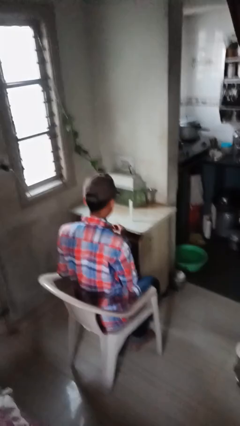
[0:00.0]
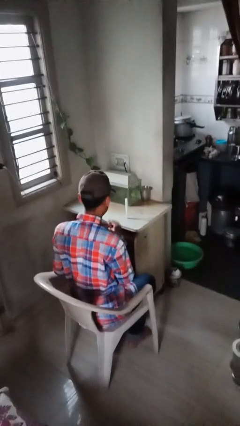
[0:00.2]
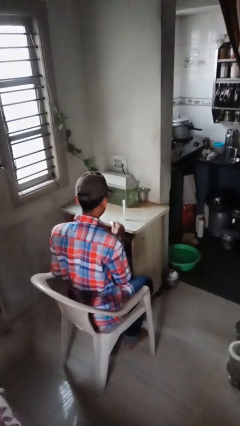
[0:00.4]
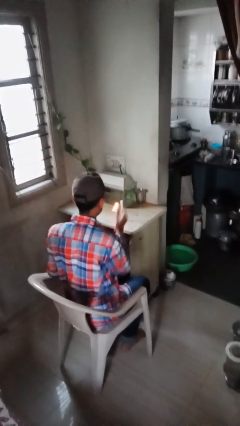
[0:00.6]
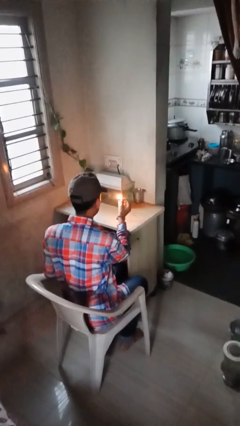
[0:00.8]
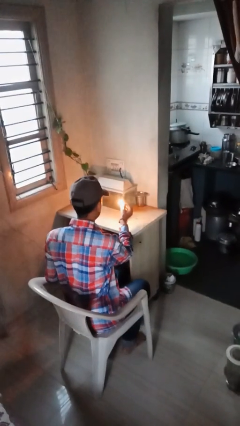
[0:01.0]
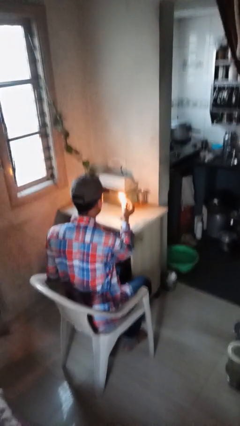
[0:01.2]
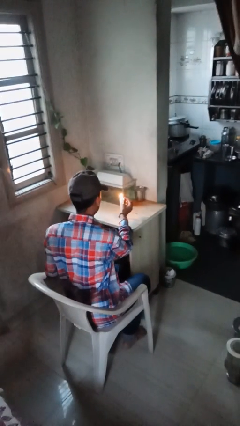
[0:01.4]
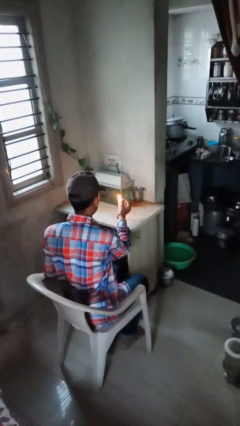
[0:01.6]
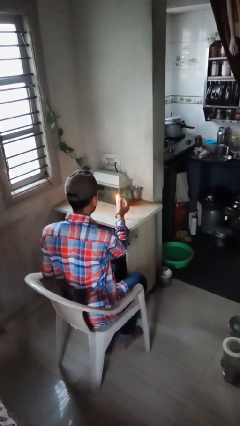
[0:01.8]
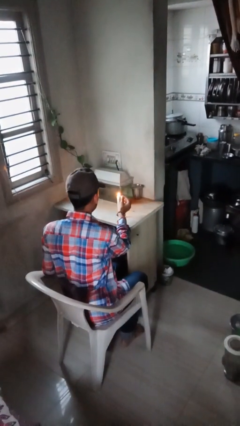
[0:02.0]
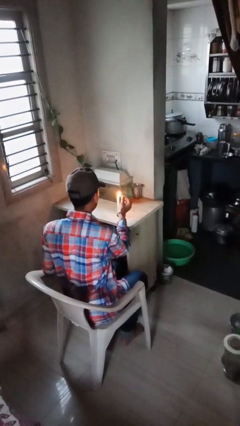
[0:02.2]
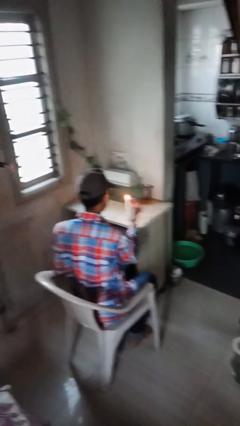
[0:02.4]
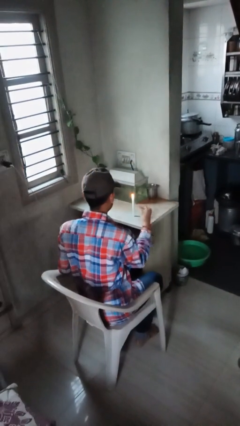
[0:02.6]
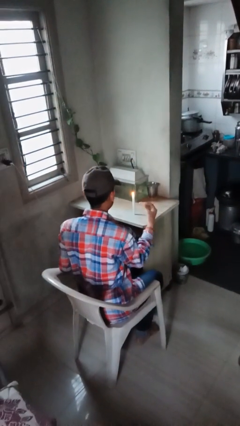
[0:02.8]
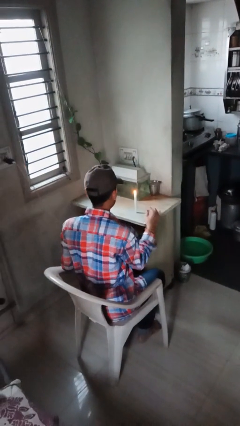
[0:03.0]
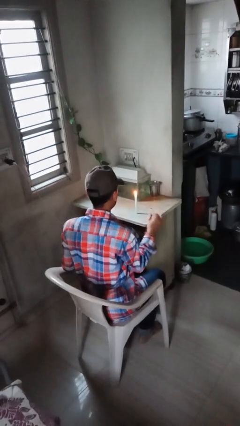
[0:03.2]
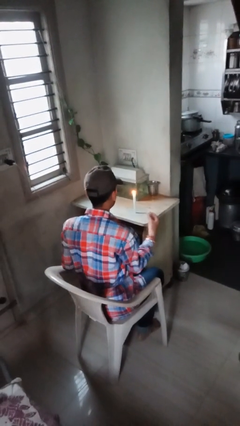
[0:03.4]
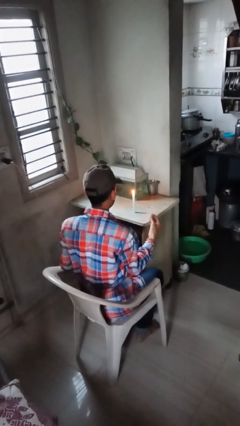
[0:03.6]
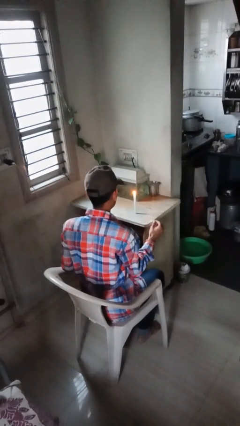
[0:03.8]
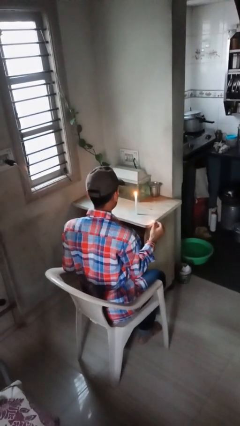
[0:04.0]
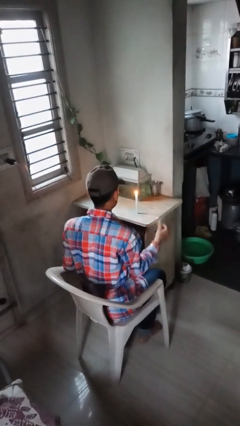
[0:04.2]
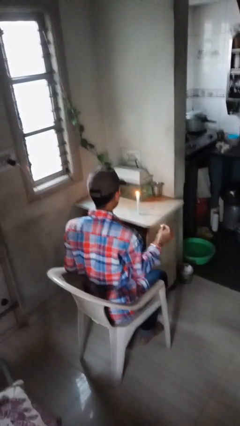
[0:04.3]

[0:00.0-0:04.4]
person lights candle

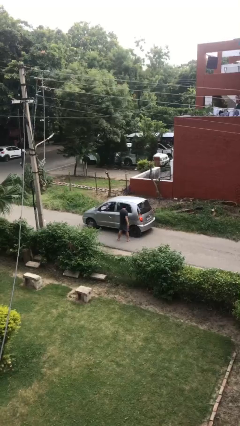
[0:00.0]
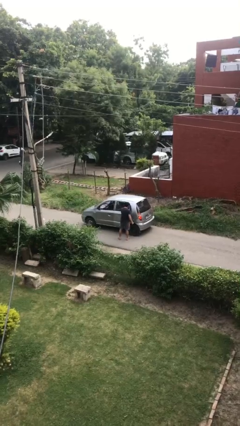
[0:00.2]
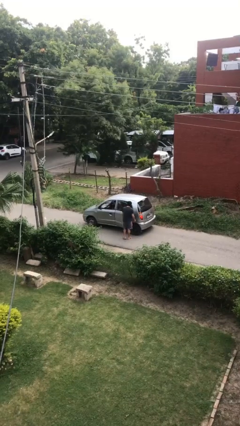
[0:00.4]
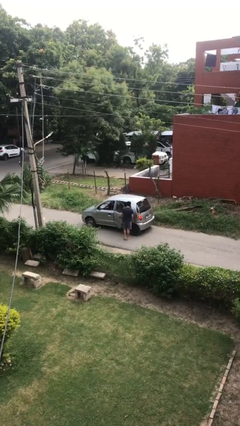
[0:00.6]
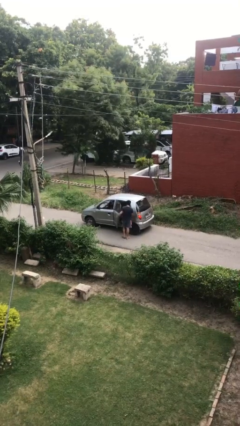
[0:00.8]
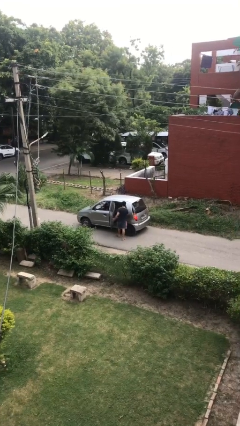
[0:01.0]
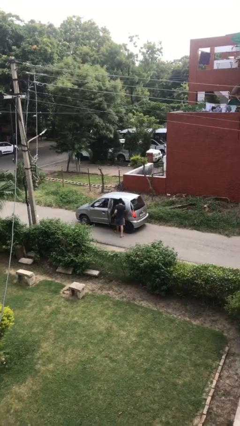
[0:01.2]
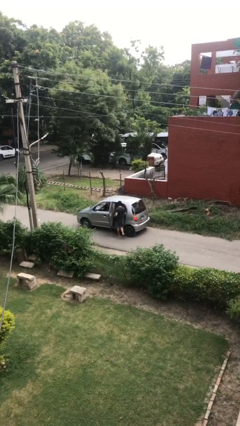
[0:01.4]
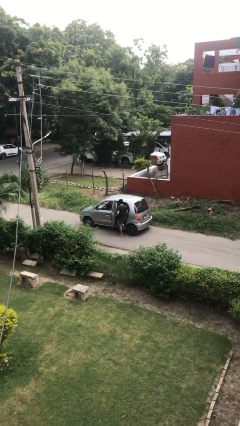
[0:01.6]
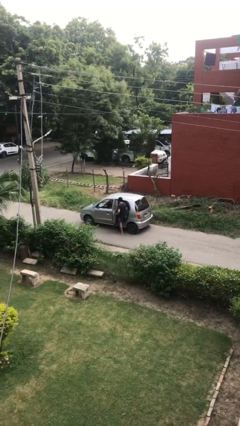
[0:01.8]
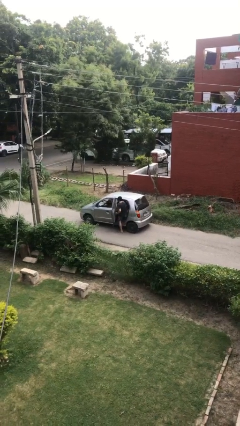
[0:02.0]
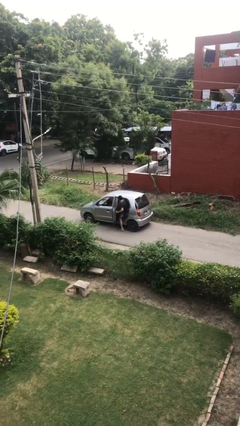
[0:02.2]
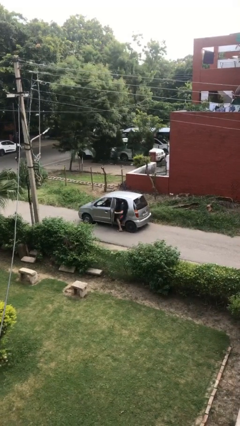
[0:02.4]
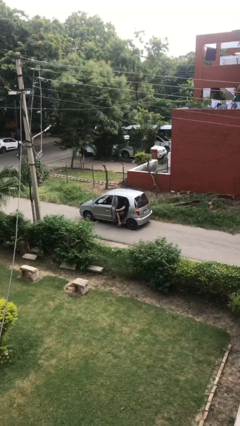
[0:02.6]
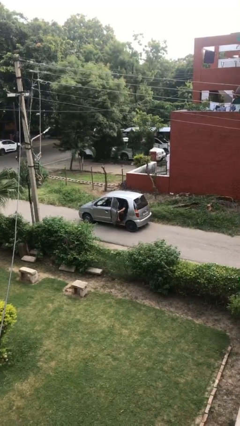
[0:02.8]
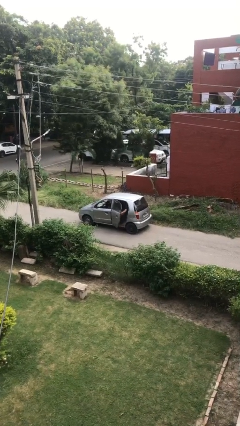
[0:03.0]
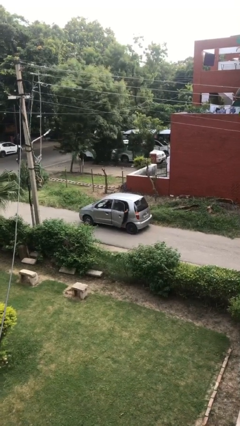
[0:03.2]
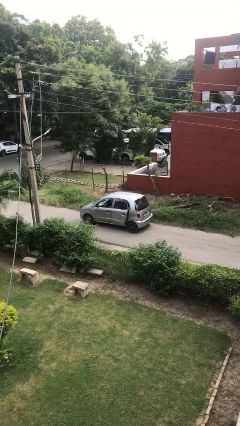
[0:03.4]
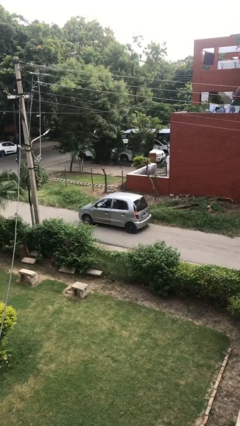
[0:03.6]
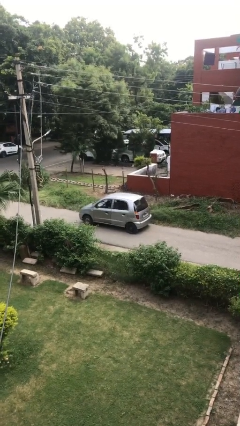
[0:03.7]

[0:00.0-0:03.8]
car picks up person

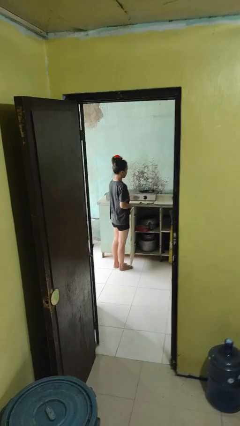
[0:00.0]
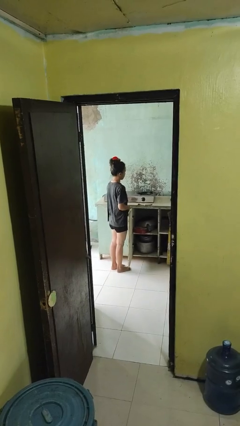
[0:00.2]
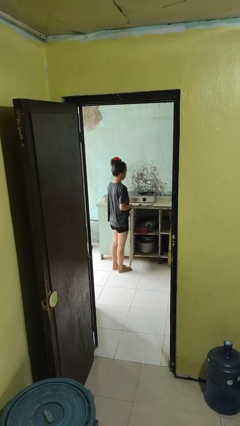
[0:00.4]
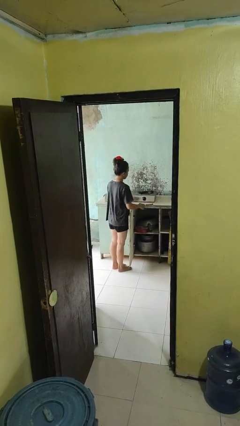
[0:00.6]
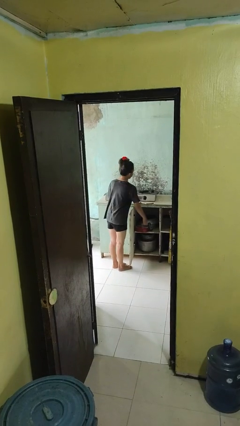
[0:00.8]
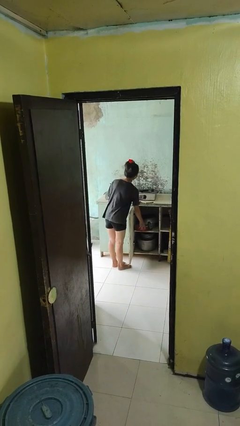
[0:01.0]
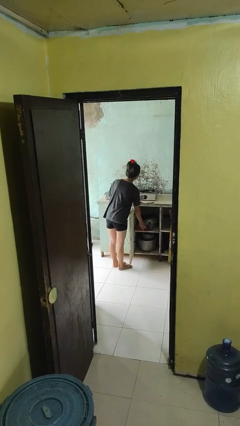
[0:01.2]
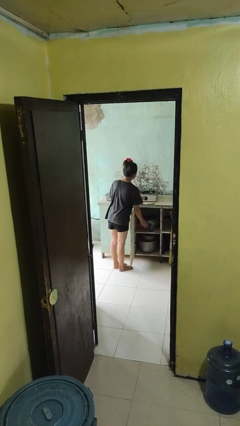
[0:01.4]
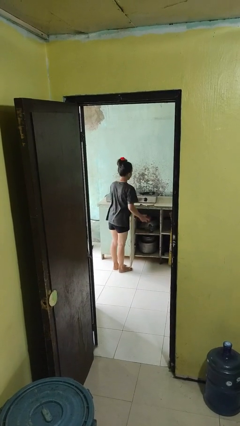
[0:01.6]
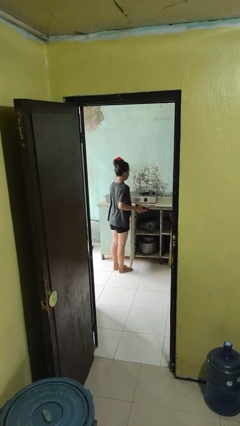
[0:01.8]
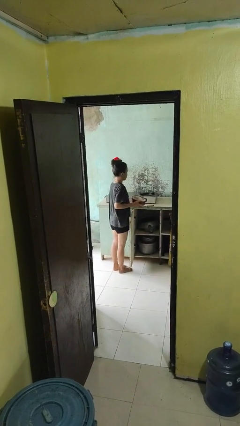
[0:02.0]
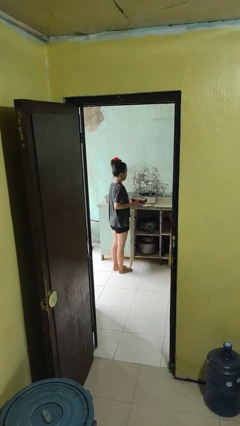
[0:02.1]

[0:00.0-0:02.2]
person takes object from cabinet

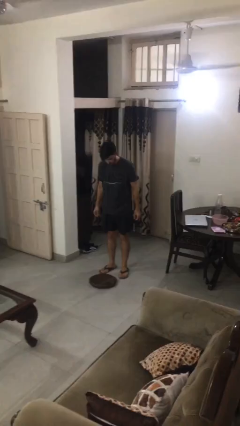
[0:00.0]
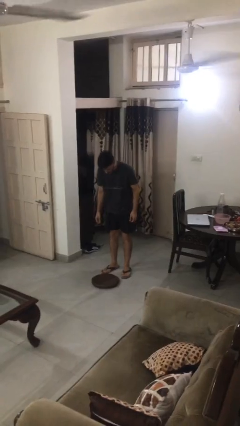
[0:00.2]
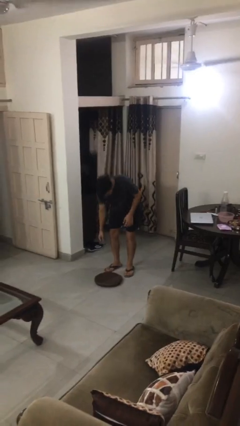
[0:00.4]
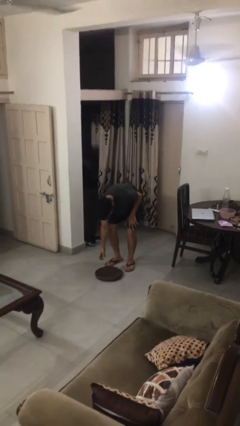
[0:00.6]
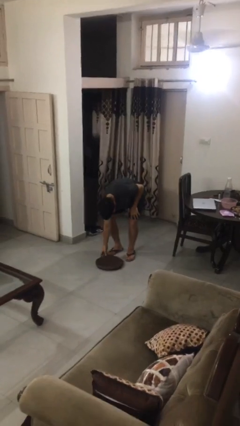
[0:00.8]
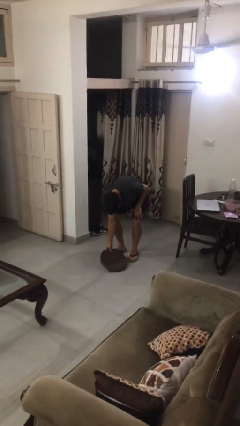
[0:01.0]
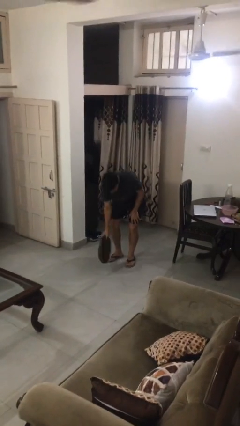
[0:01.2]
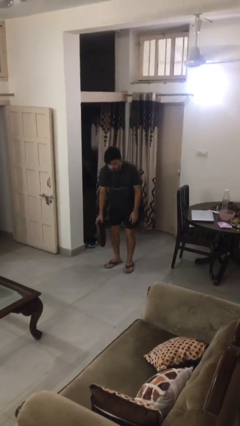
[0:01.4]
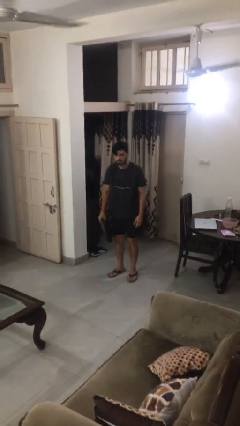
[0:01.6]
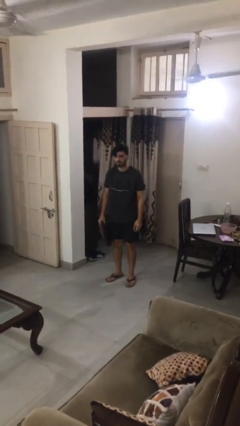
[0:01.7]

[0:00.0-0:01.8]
person picks up object from floor

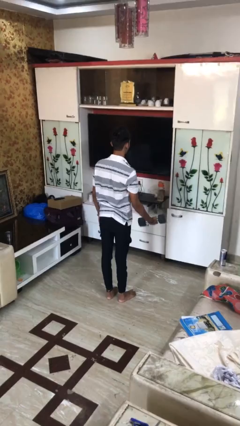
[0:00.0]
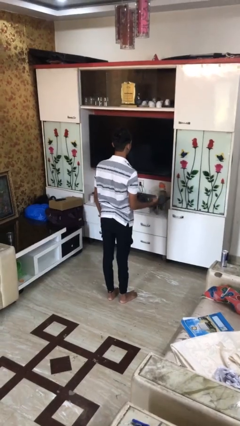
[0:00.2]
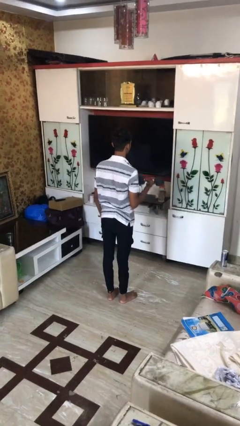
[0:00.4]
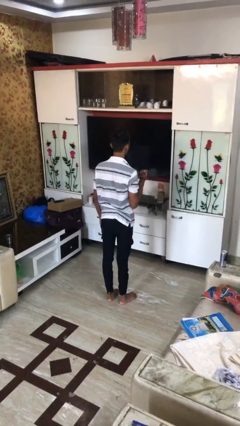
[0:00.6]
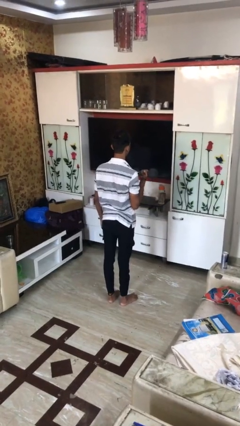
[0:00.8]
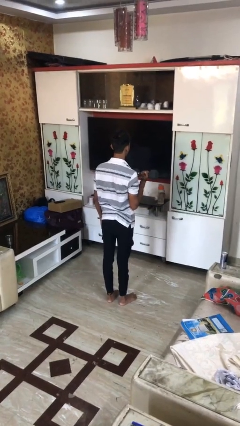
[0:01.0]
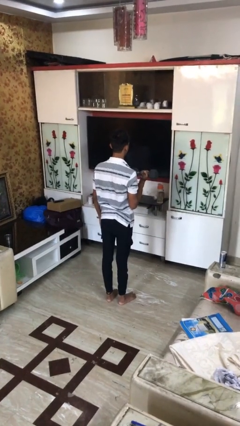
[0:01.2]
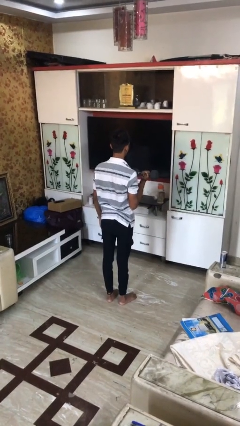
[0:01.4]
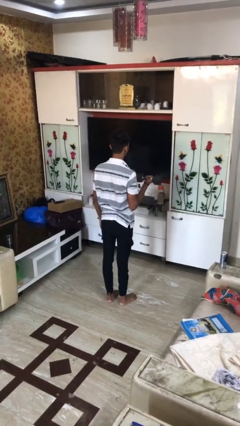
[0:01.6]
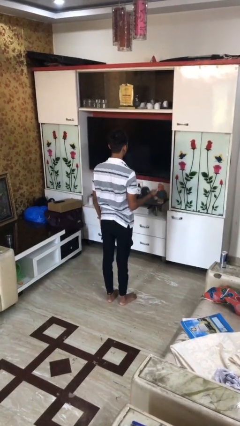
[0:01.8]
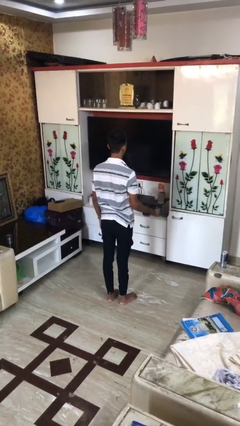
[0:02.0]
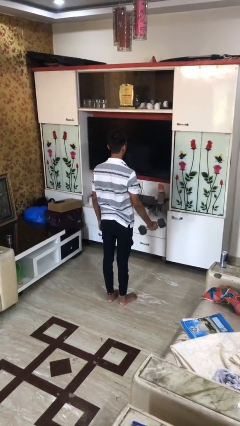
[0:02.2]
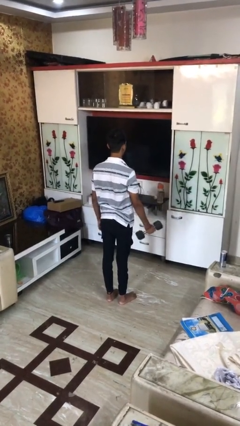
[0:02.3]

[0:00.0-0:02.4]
person lifts dumbbells

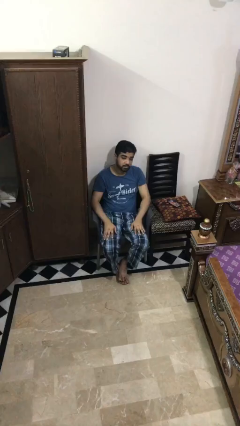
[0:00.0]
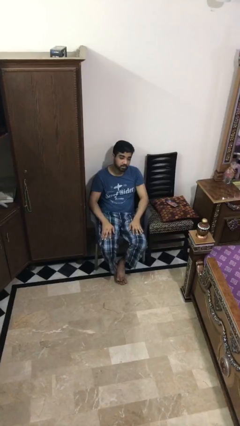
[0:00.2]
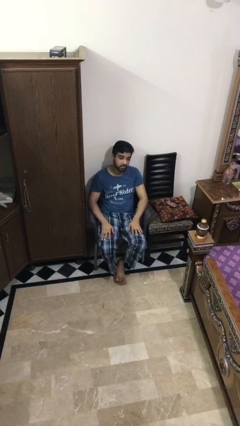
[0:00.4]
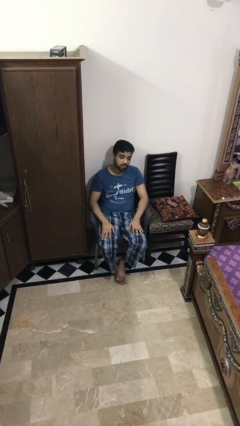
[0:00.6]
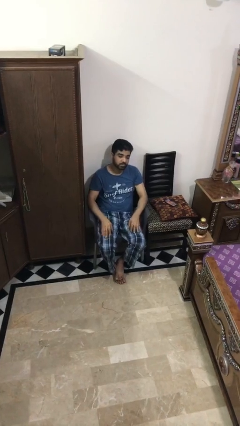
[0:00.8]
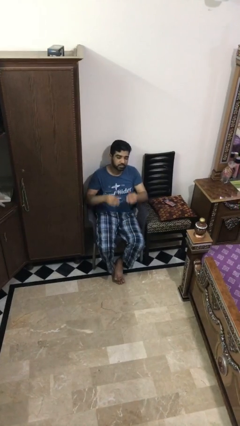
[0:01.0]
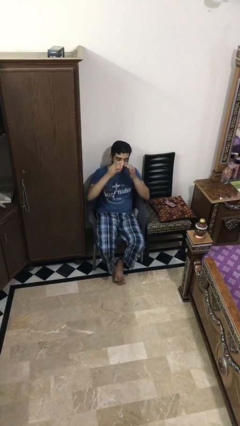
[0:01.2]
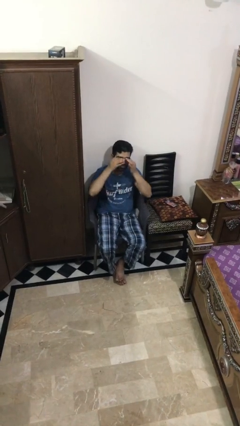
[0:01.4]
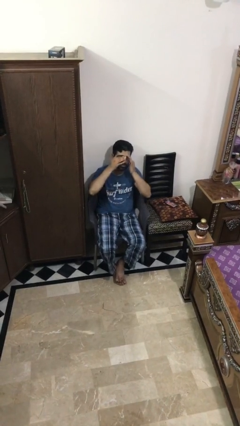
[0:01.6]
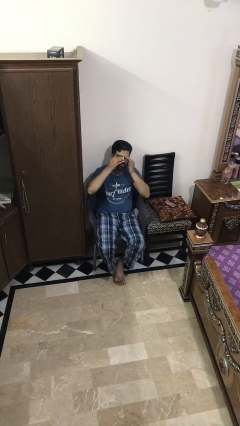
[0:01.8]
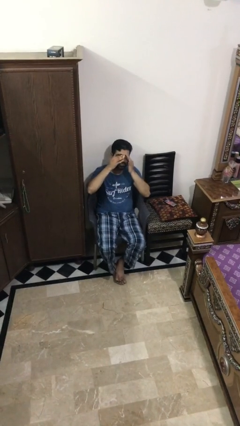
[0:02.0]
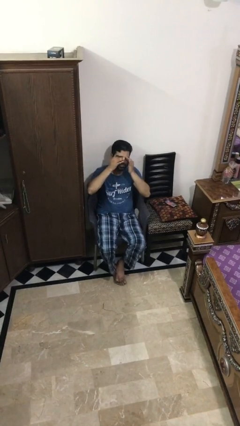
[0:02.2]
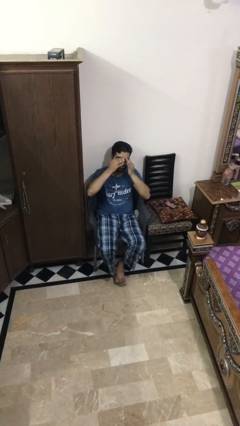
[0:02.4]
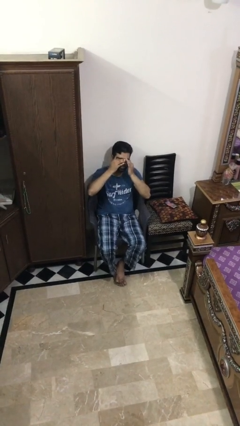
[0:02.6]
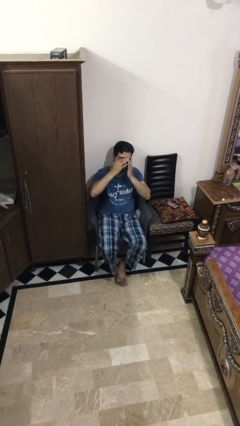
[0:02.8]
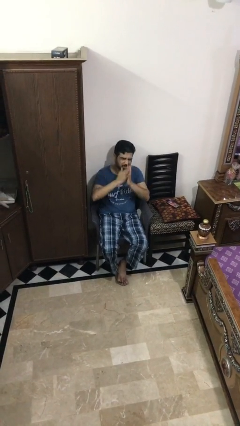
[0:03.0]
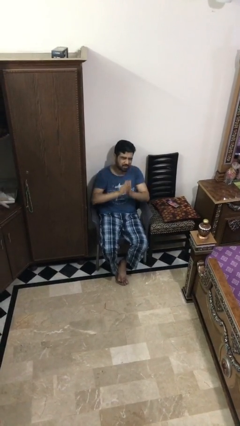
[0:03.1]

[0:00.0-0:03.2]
person rubs eyes
